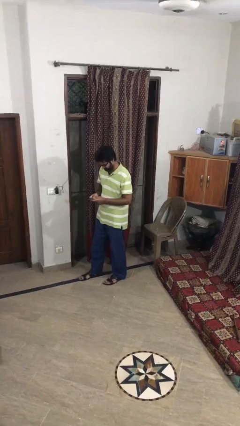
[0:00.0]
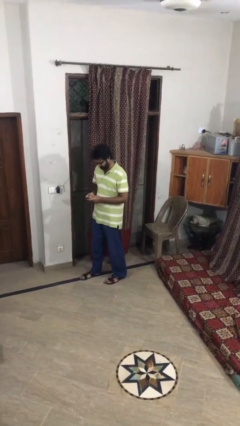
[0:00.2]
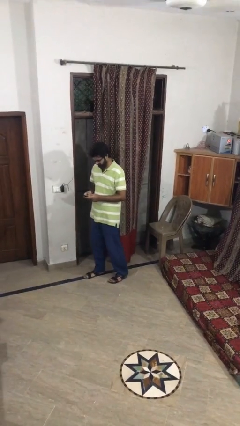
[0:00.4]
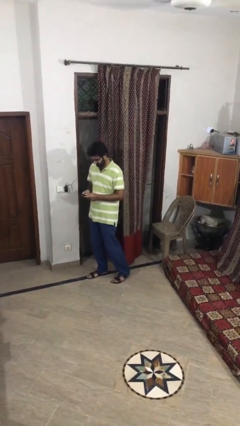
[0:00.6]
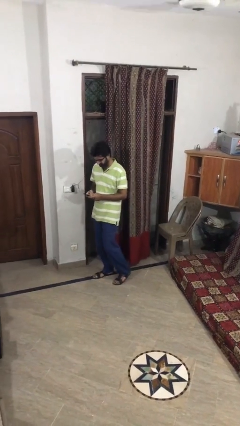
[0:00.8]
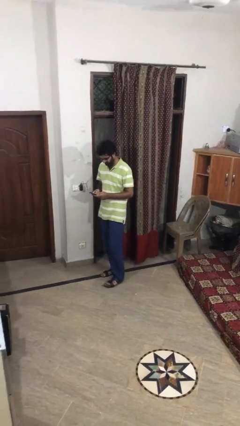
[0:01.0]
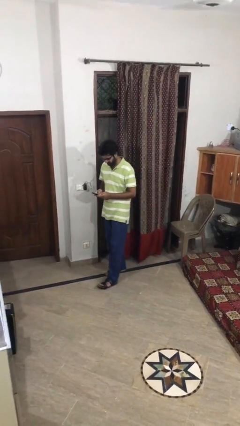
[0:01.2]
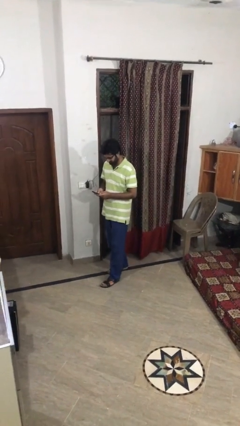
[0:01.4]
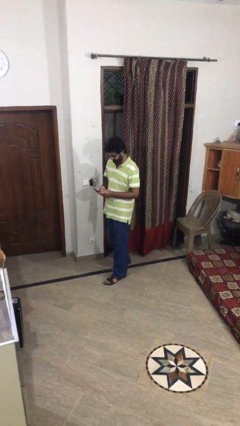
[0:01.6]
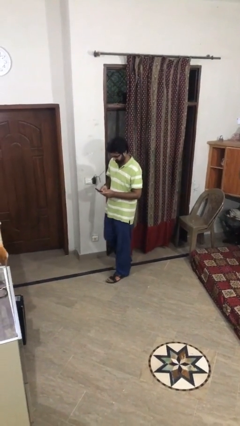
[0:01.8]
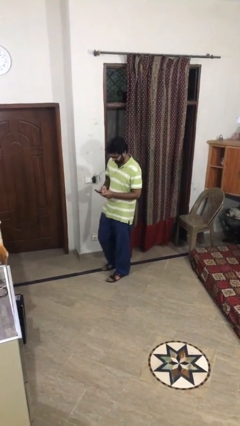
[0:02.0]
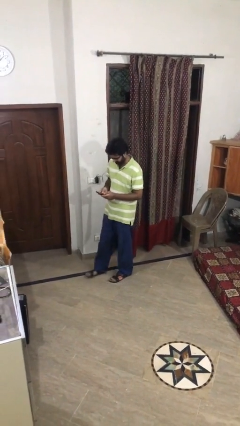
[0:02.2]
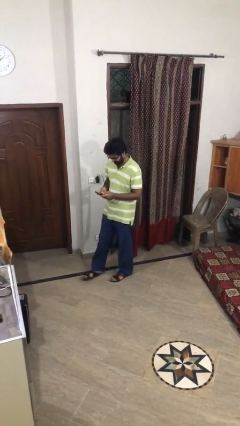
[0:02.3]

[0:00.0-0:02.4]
person texts on phone

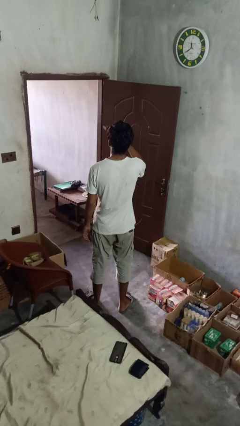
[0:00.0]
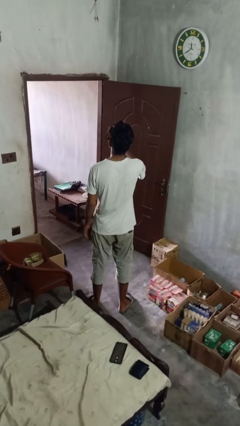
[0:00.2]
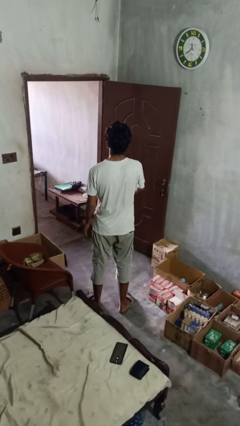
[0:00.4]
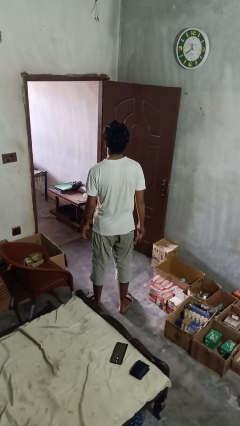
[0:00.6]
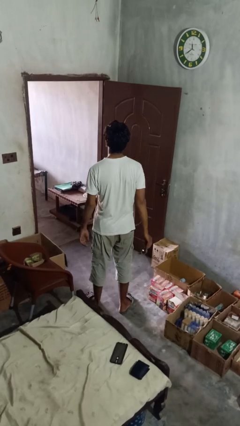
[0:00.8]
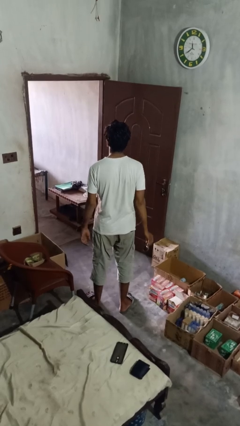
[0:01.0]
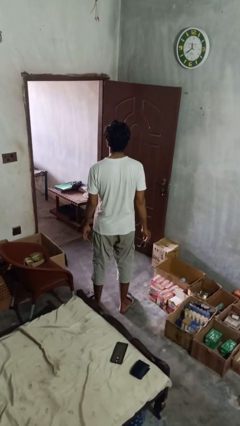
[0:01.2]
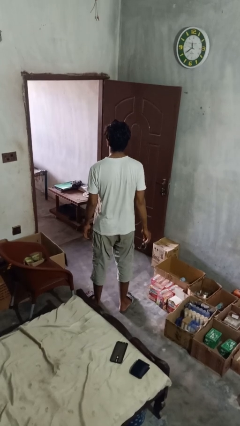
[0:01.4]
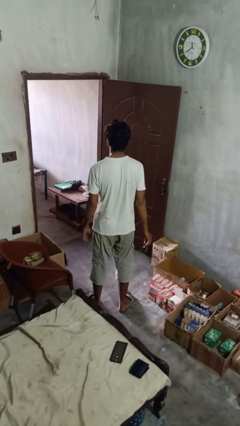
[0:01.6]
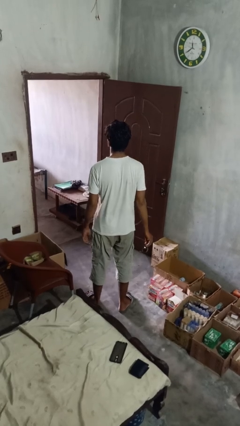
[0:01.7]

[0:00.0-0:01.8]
person takes off glasses

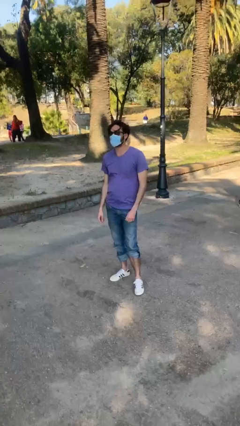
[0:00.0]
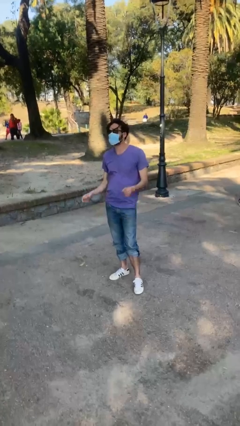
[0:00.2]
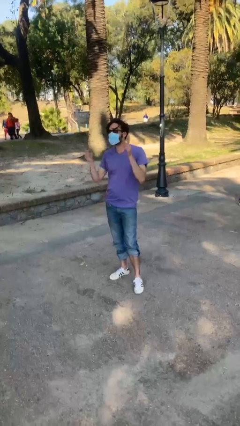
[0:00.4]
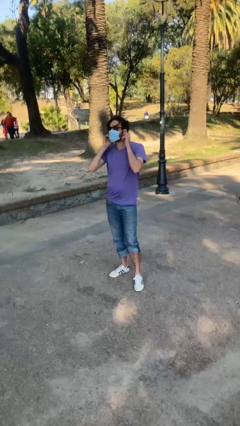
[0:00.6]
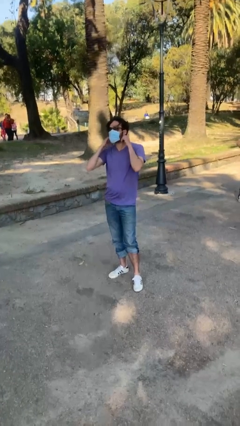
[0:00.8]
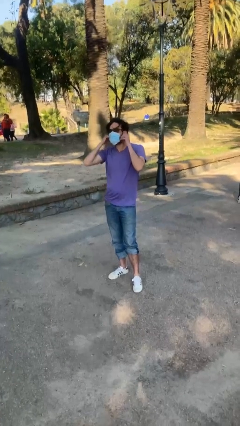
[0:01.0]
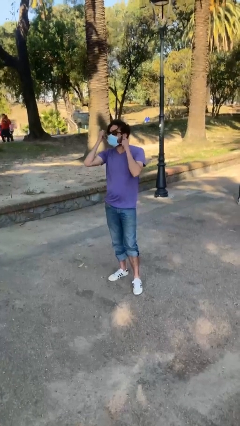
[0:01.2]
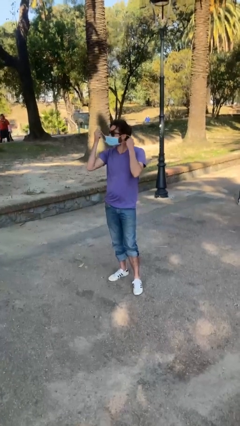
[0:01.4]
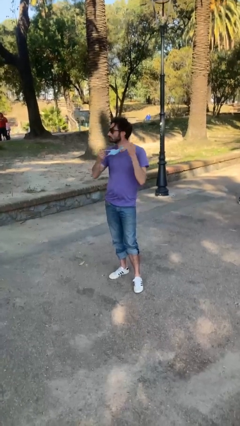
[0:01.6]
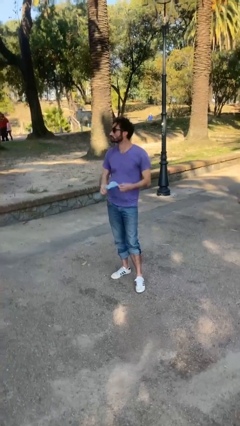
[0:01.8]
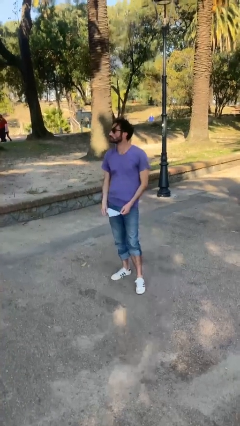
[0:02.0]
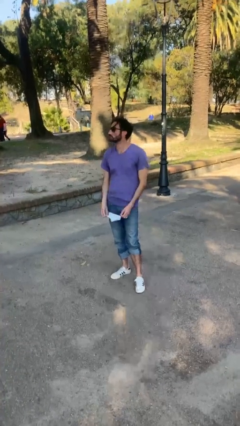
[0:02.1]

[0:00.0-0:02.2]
person takes off facemask

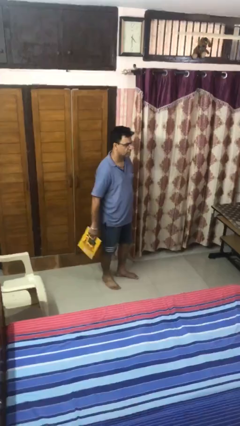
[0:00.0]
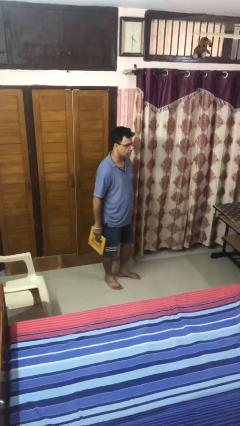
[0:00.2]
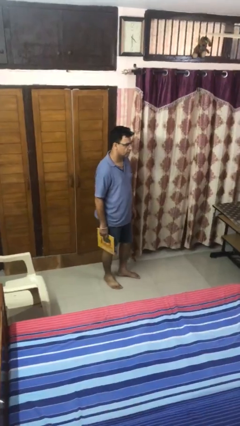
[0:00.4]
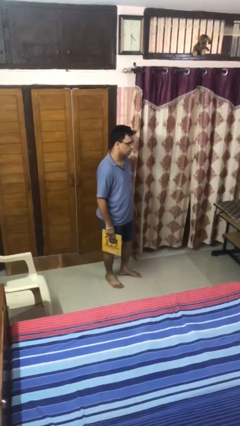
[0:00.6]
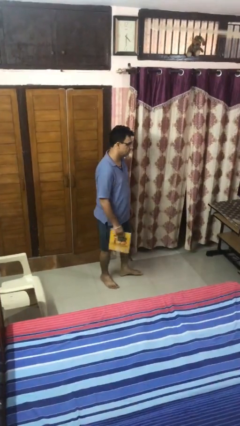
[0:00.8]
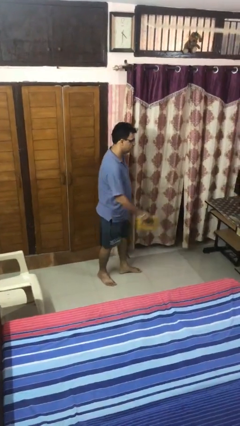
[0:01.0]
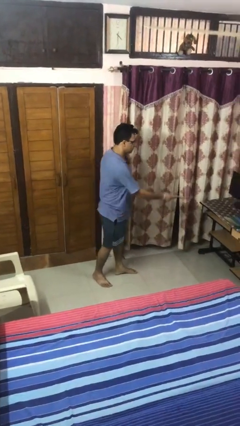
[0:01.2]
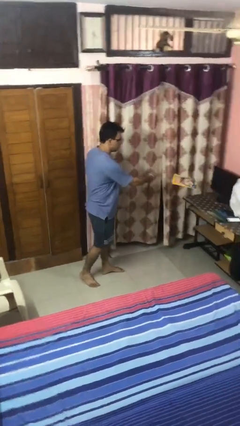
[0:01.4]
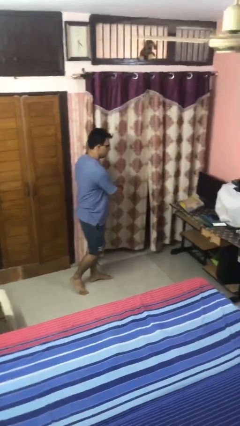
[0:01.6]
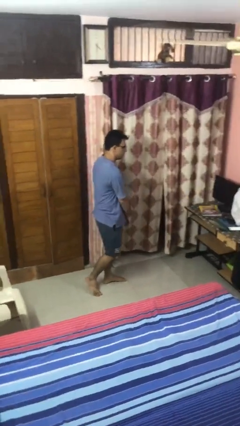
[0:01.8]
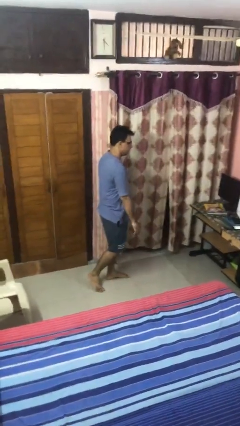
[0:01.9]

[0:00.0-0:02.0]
person throws object on table

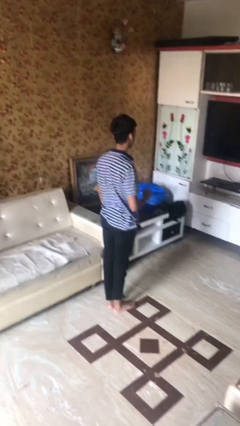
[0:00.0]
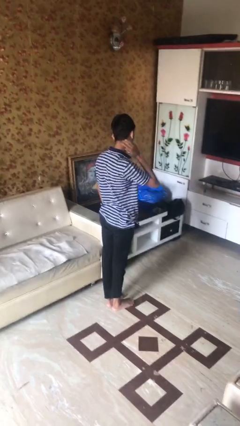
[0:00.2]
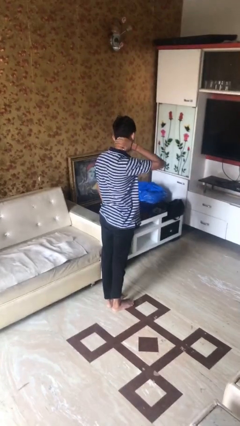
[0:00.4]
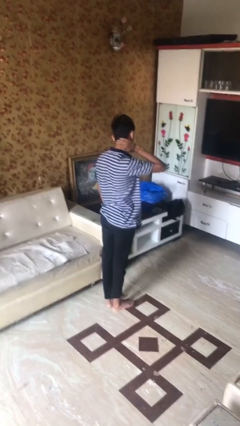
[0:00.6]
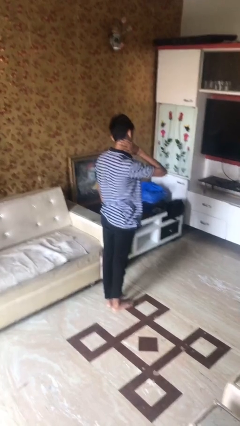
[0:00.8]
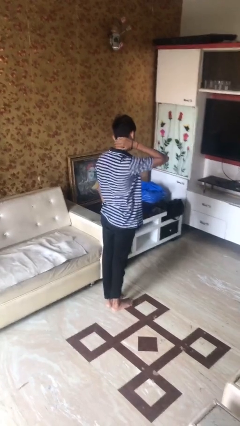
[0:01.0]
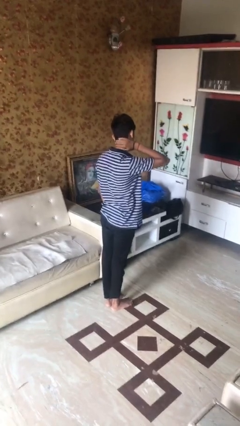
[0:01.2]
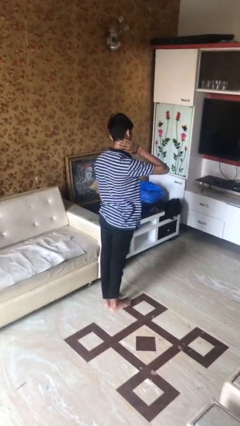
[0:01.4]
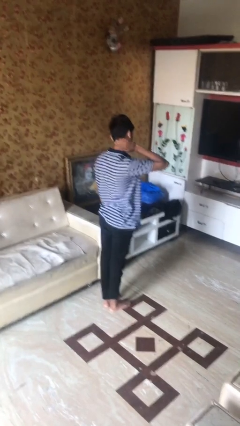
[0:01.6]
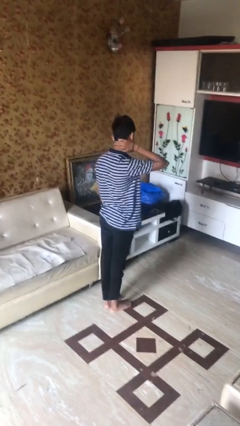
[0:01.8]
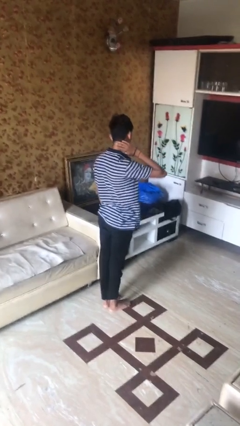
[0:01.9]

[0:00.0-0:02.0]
person rubs neck

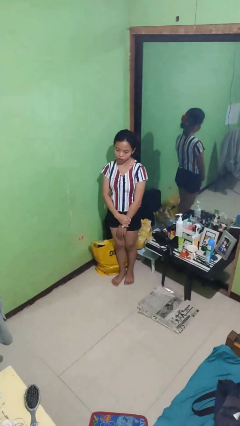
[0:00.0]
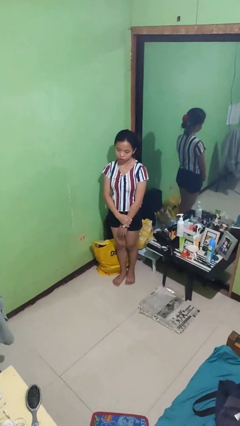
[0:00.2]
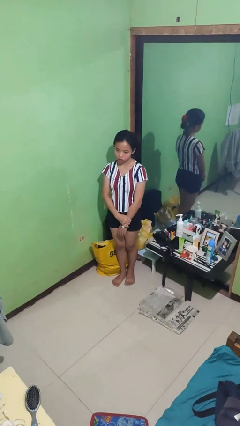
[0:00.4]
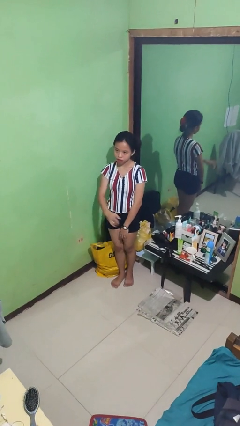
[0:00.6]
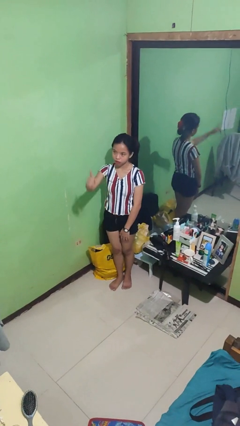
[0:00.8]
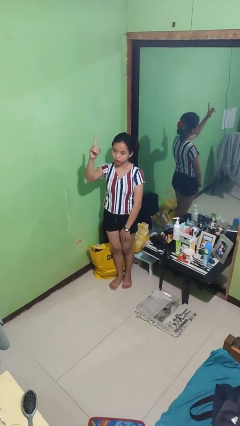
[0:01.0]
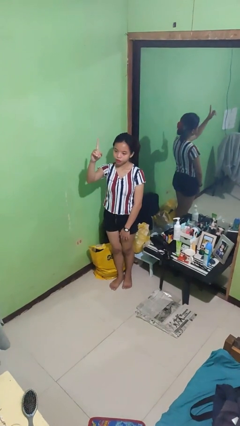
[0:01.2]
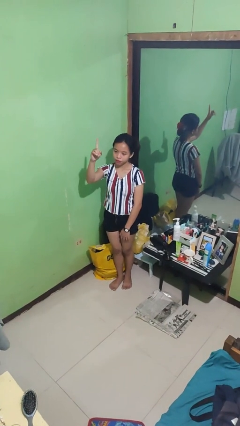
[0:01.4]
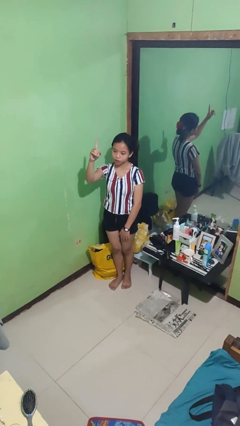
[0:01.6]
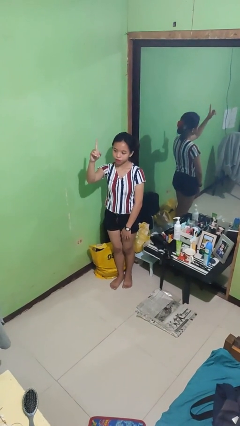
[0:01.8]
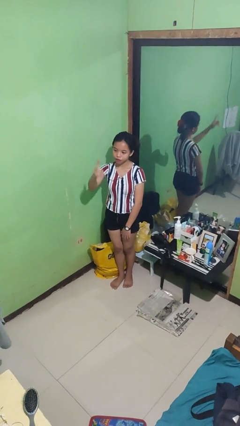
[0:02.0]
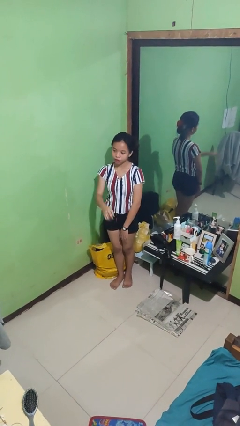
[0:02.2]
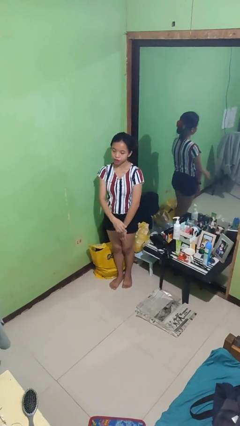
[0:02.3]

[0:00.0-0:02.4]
person gestures number one

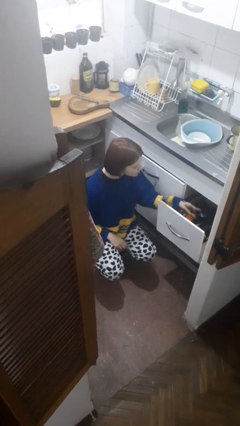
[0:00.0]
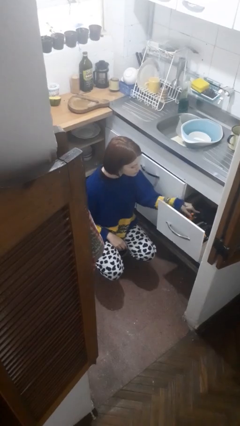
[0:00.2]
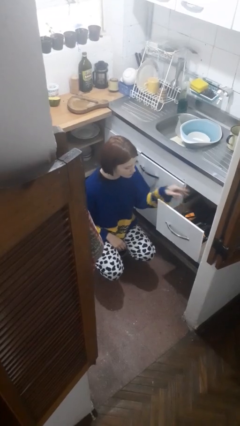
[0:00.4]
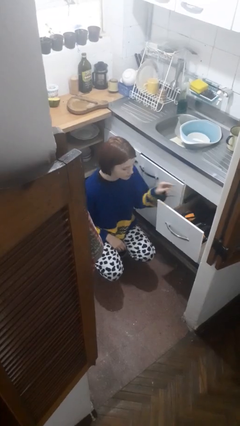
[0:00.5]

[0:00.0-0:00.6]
person puts object into kitchen drawer

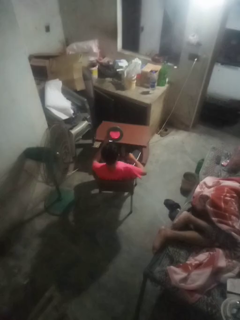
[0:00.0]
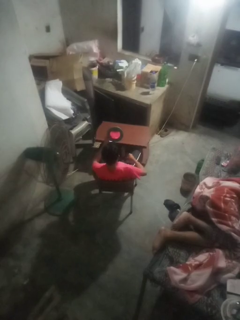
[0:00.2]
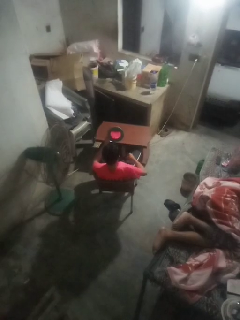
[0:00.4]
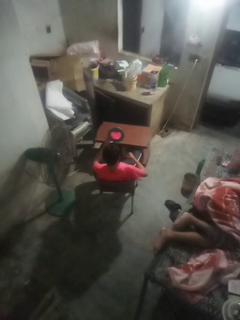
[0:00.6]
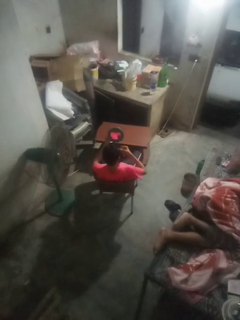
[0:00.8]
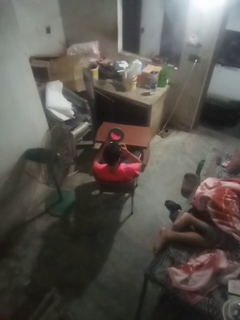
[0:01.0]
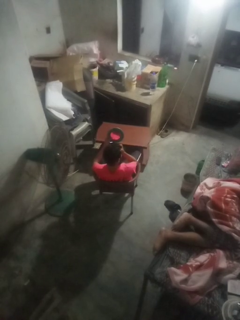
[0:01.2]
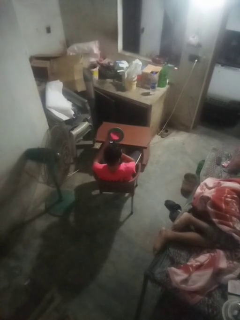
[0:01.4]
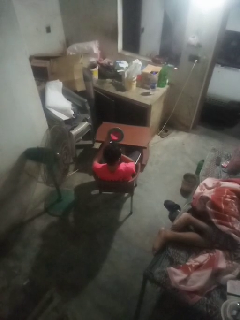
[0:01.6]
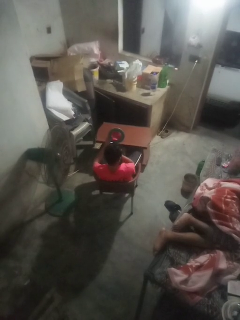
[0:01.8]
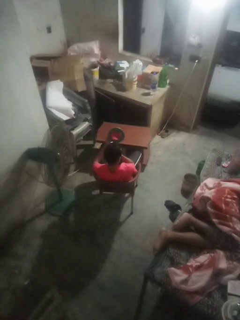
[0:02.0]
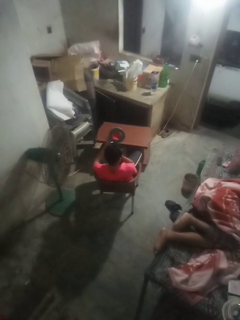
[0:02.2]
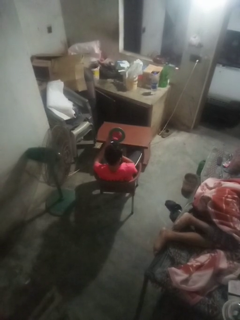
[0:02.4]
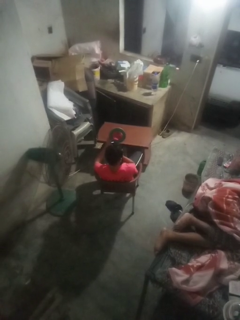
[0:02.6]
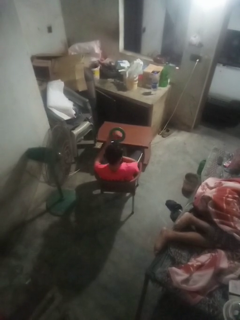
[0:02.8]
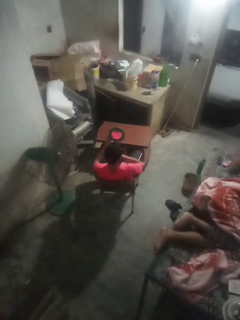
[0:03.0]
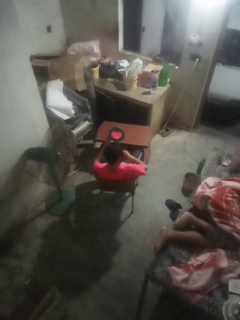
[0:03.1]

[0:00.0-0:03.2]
person applies eye makeup

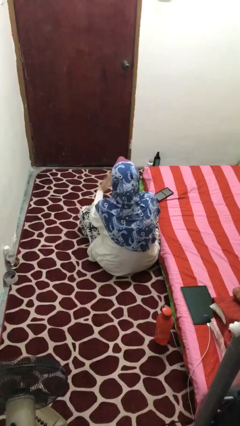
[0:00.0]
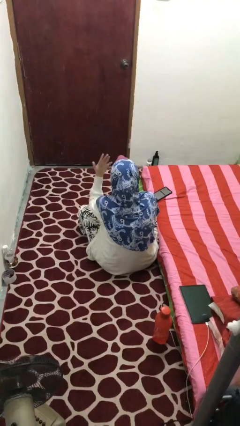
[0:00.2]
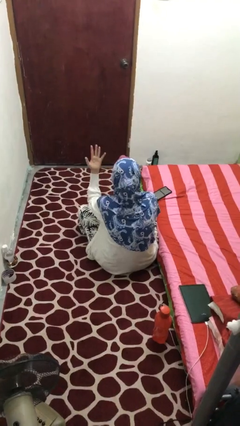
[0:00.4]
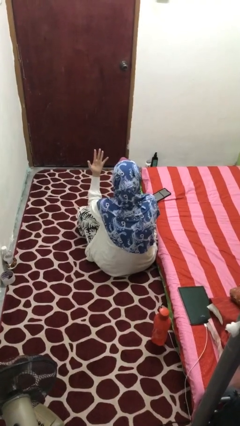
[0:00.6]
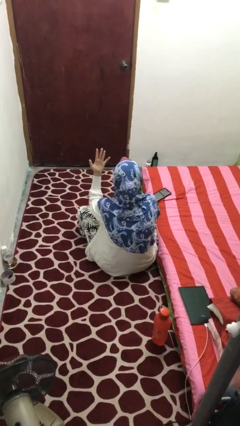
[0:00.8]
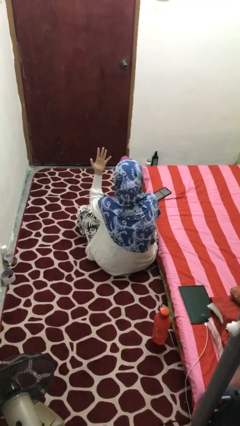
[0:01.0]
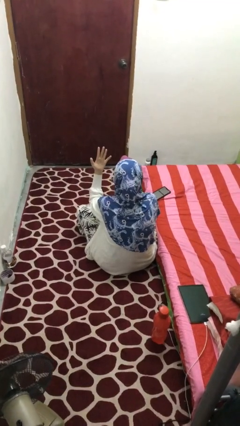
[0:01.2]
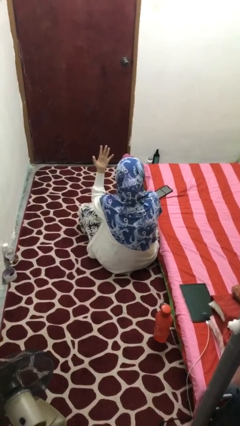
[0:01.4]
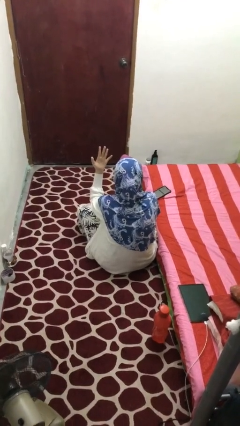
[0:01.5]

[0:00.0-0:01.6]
person gestures number five
